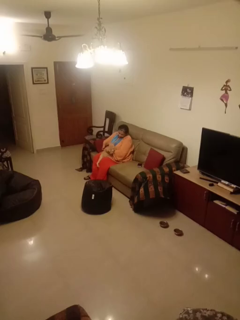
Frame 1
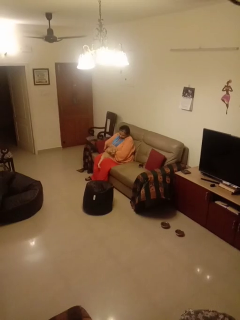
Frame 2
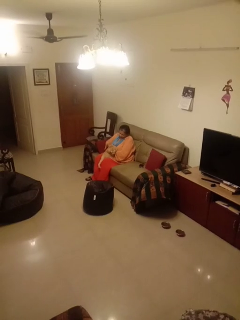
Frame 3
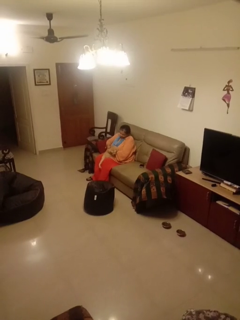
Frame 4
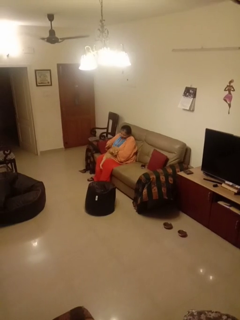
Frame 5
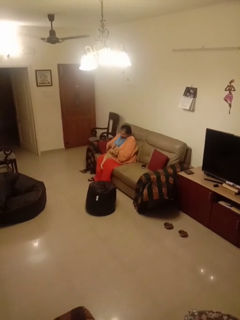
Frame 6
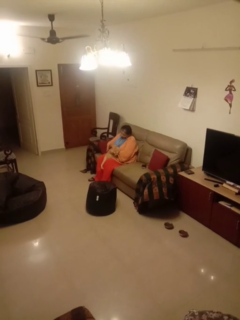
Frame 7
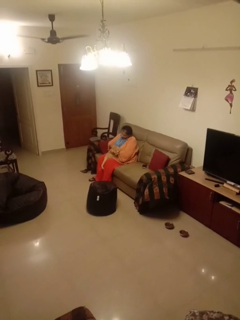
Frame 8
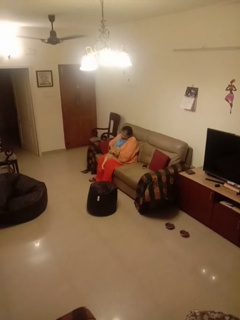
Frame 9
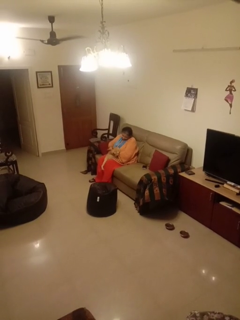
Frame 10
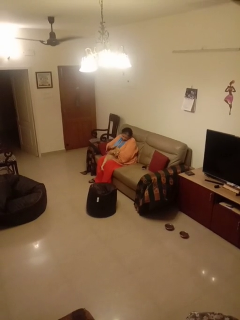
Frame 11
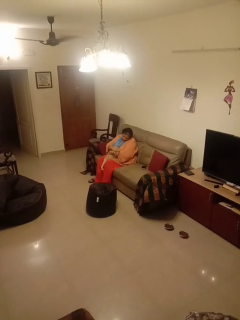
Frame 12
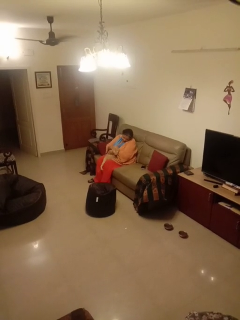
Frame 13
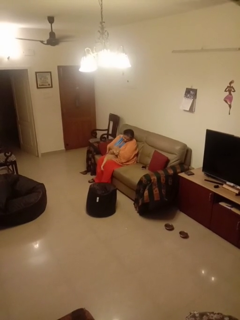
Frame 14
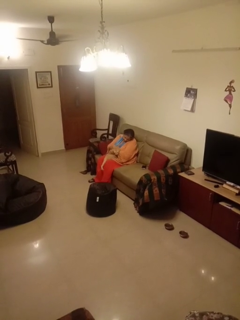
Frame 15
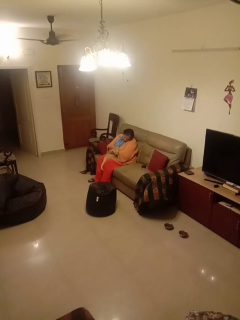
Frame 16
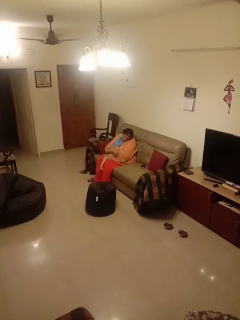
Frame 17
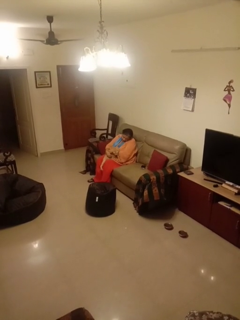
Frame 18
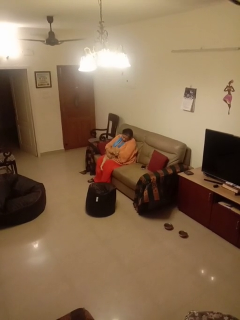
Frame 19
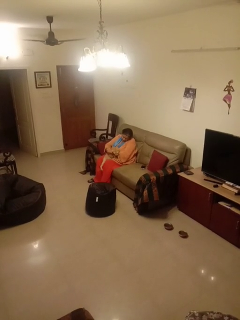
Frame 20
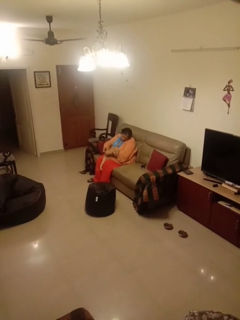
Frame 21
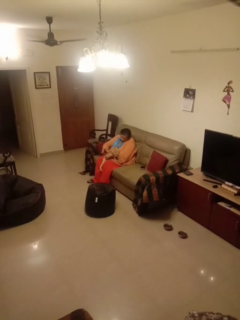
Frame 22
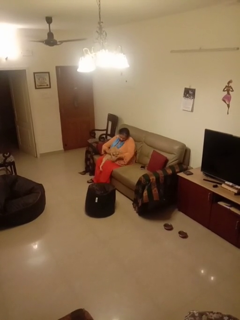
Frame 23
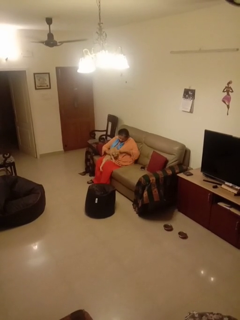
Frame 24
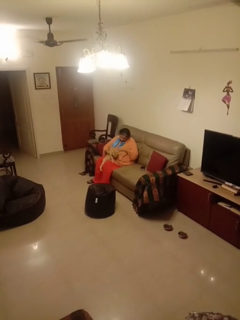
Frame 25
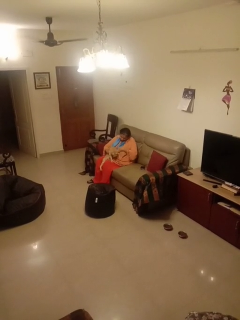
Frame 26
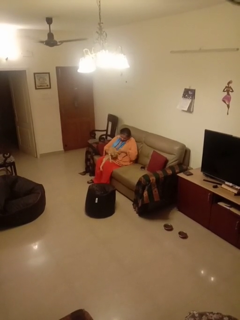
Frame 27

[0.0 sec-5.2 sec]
person pets cat

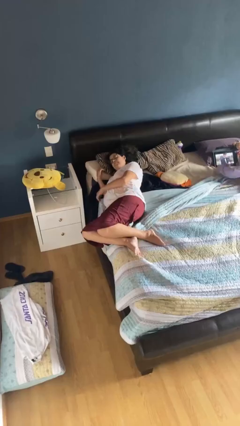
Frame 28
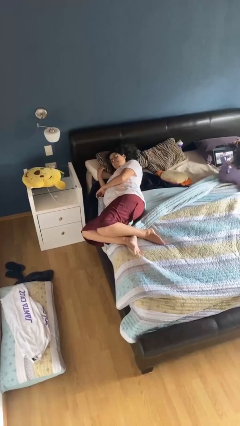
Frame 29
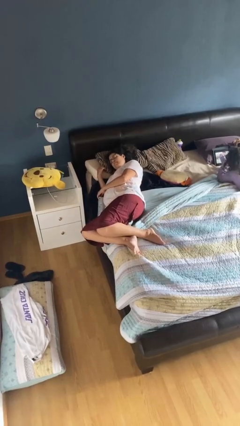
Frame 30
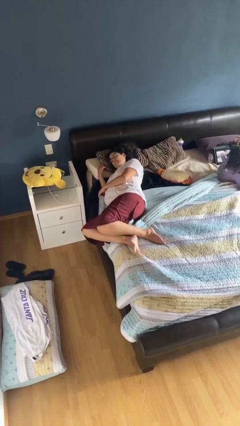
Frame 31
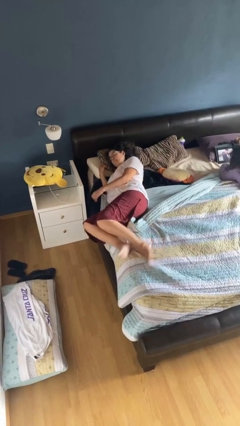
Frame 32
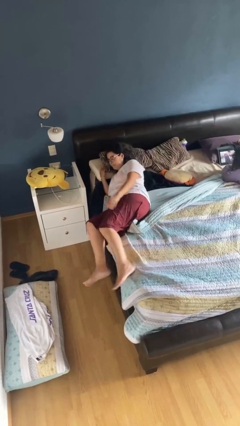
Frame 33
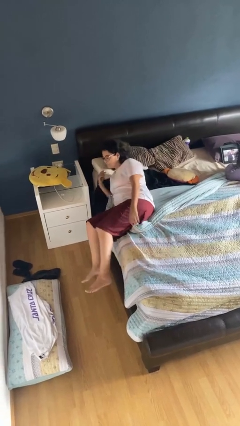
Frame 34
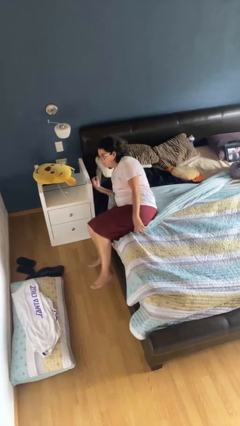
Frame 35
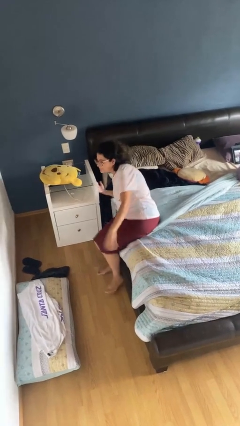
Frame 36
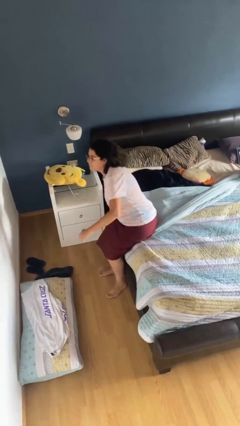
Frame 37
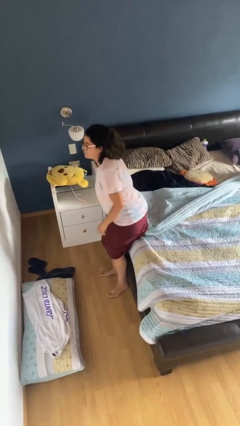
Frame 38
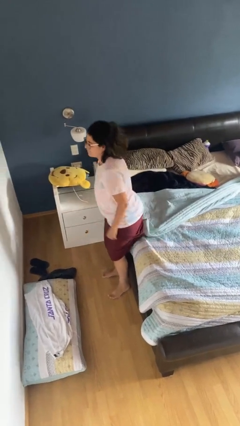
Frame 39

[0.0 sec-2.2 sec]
person stands up

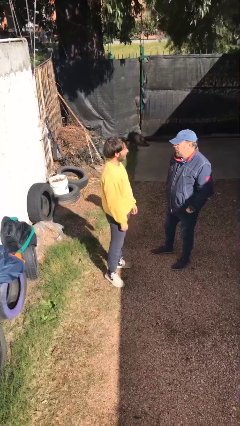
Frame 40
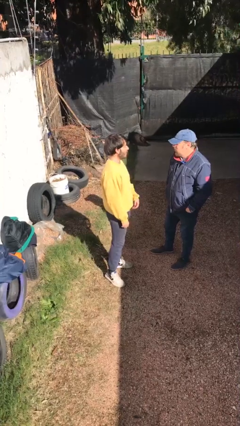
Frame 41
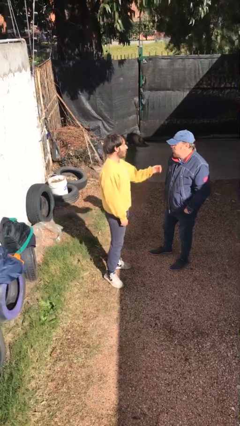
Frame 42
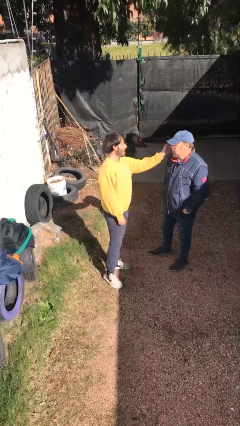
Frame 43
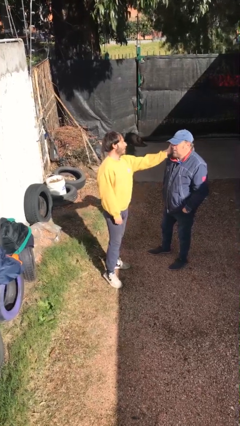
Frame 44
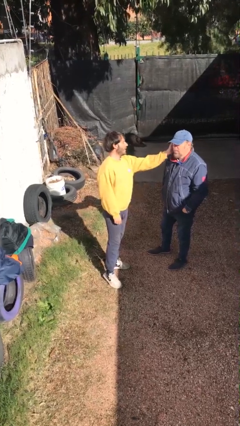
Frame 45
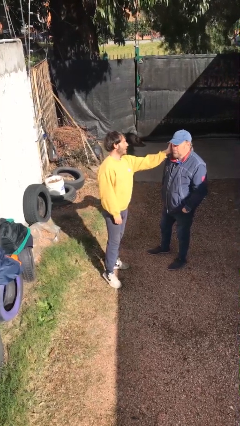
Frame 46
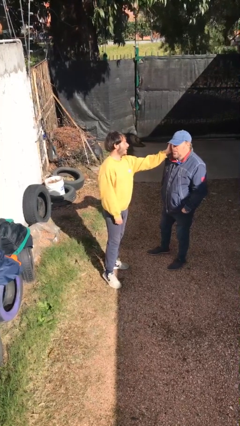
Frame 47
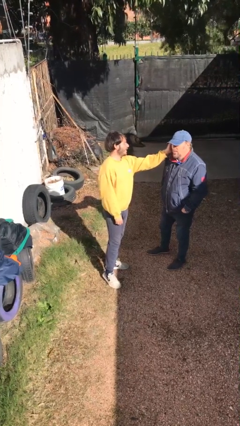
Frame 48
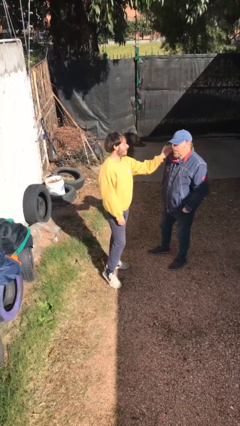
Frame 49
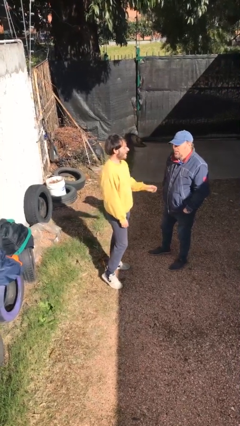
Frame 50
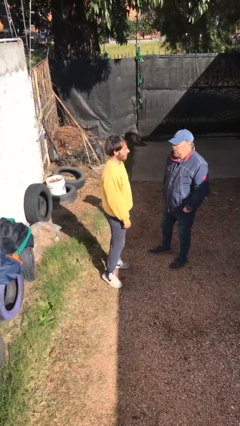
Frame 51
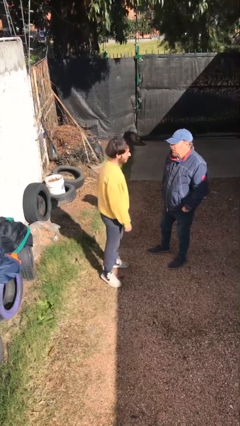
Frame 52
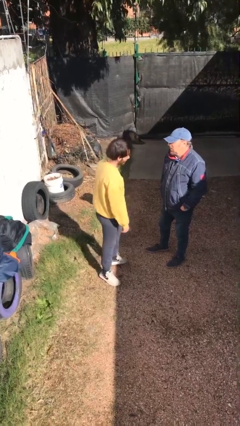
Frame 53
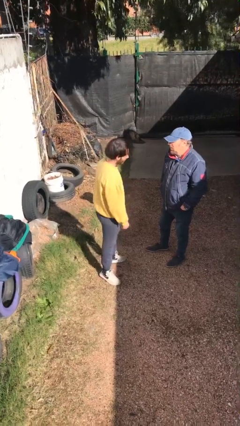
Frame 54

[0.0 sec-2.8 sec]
person touches face of person

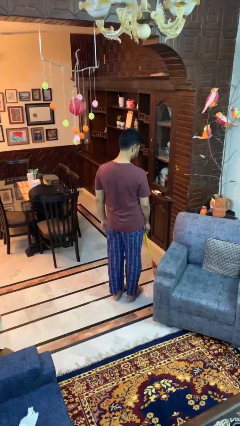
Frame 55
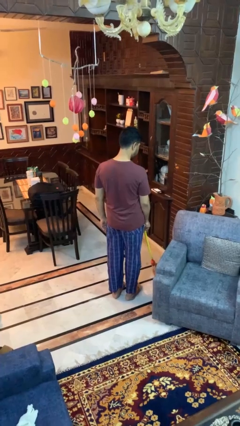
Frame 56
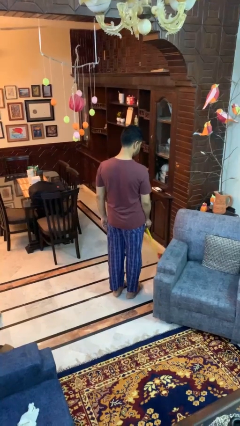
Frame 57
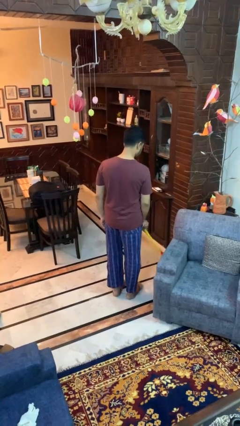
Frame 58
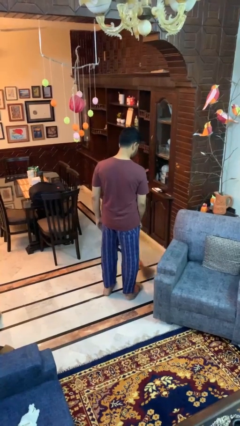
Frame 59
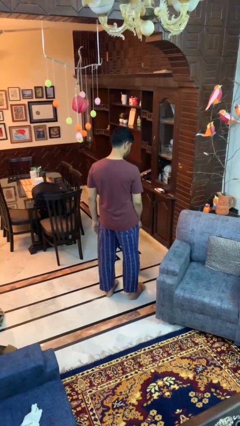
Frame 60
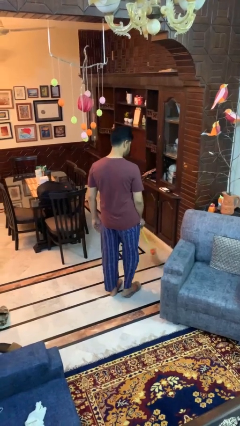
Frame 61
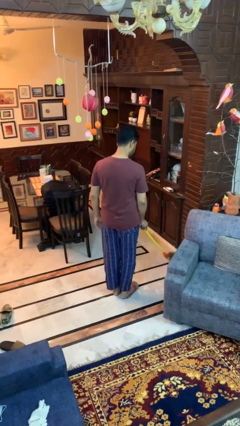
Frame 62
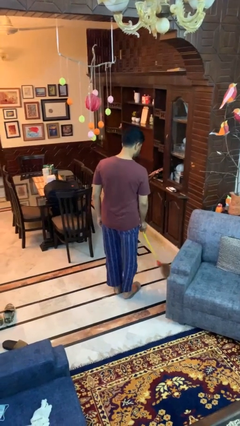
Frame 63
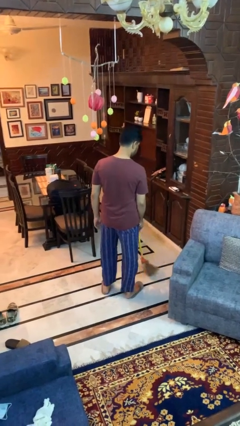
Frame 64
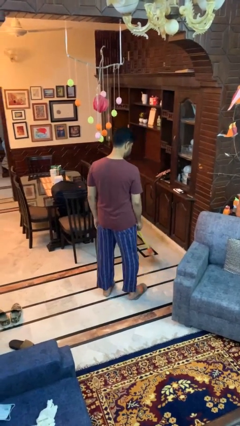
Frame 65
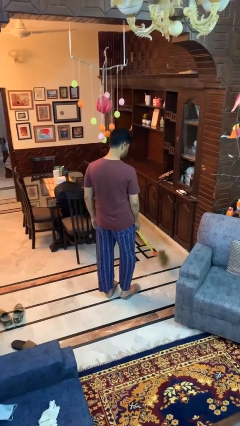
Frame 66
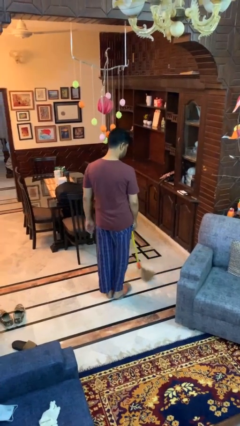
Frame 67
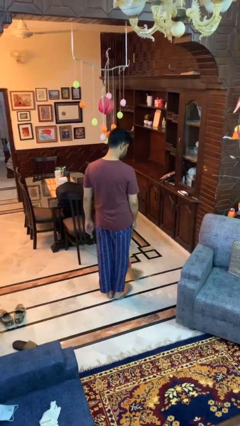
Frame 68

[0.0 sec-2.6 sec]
person sweeps floor

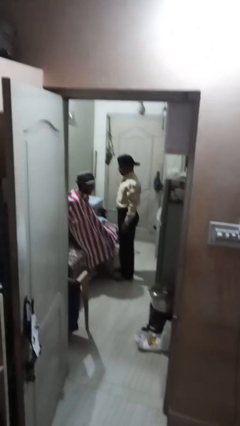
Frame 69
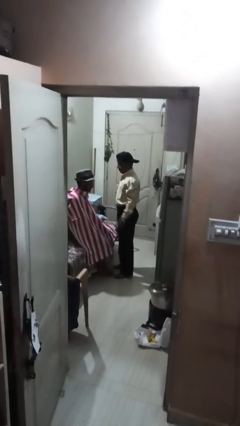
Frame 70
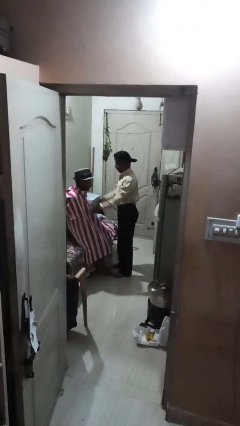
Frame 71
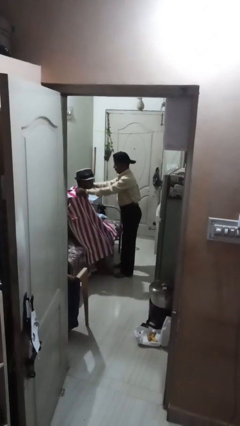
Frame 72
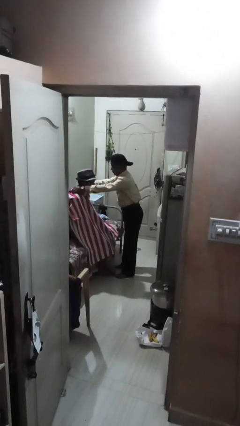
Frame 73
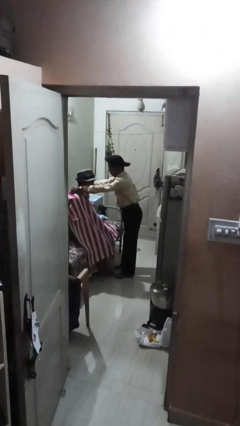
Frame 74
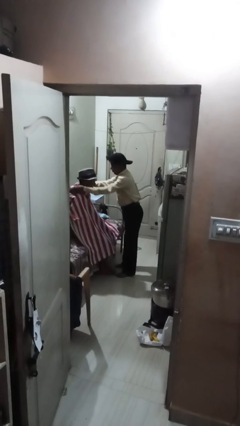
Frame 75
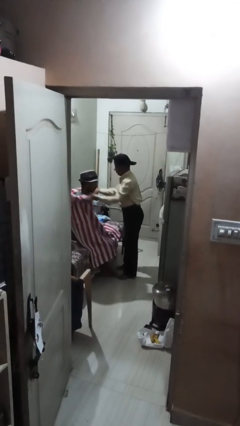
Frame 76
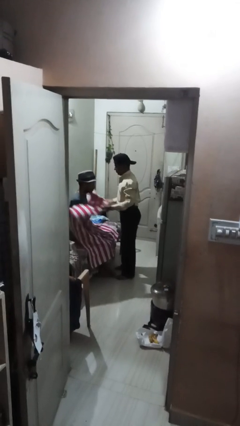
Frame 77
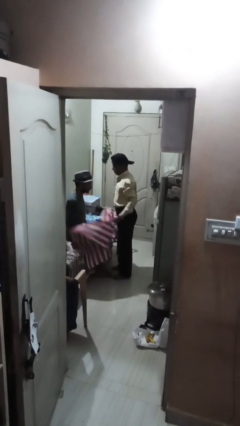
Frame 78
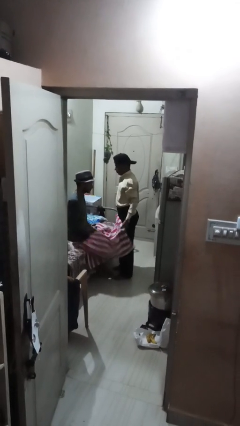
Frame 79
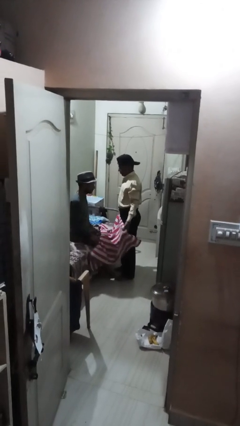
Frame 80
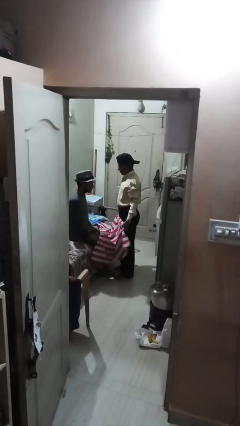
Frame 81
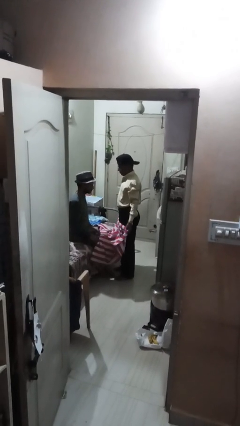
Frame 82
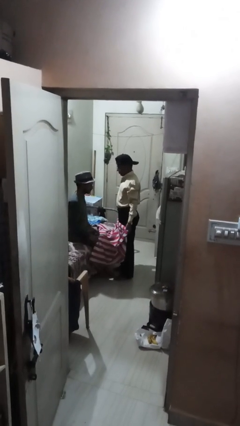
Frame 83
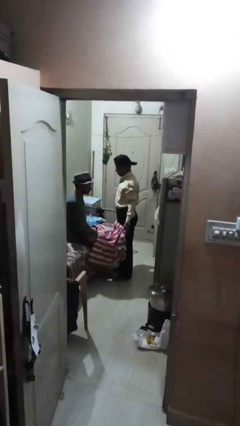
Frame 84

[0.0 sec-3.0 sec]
person uncovers friend with blanket

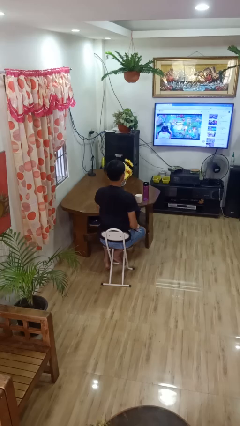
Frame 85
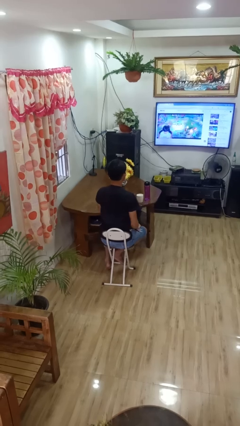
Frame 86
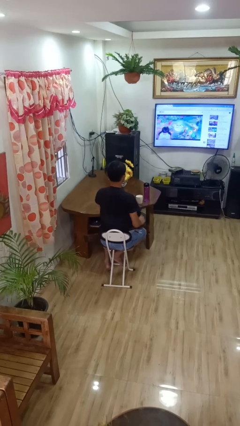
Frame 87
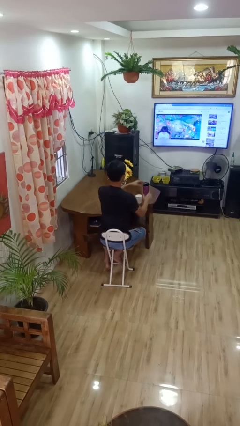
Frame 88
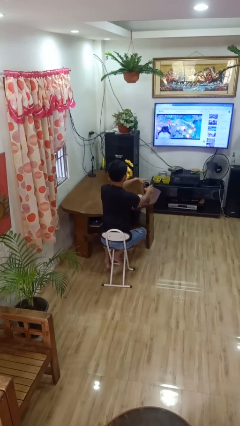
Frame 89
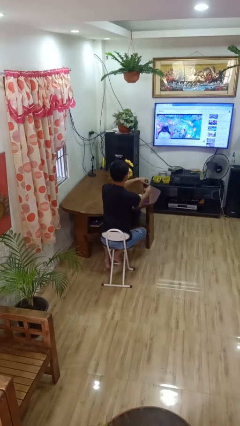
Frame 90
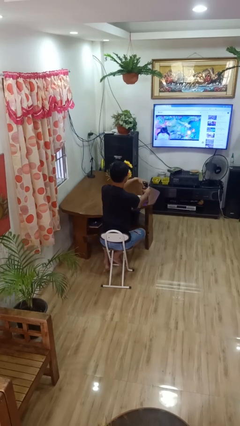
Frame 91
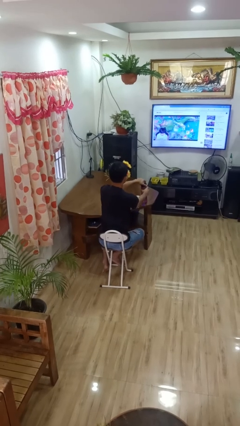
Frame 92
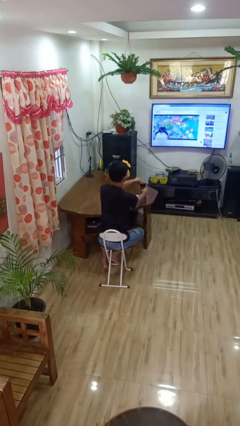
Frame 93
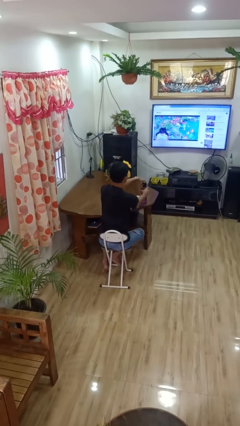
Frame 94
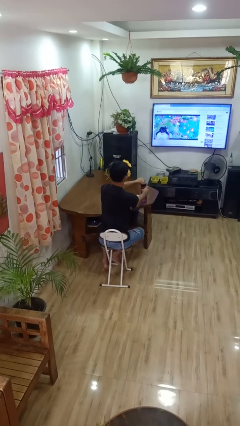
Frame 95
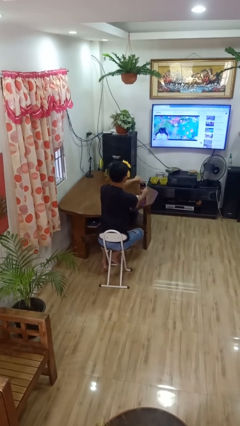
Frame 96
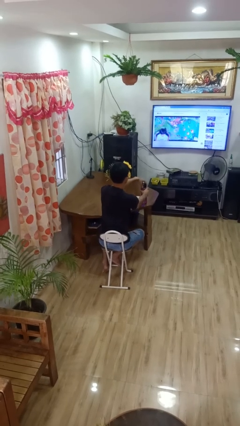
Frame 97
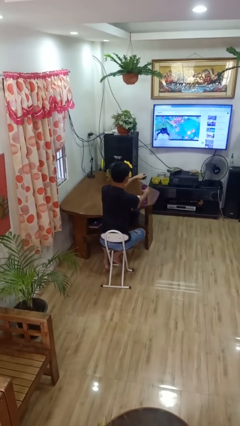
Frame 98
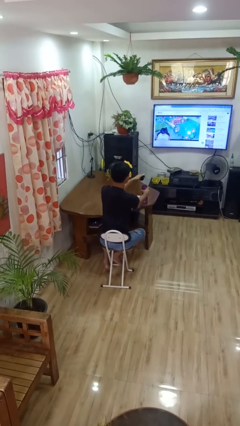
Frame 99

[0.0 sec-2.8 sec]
person unscrews lid from bottle
